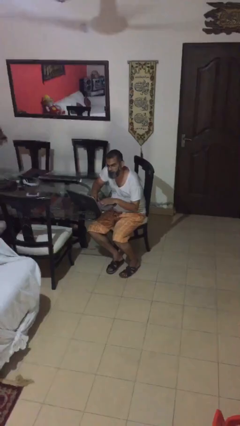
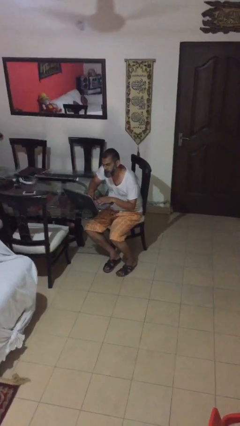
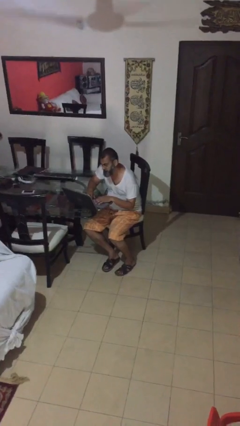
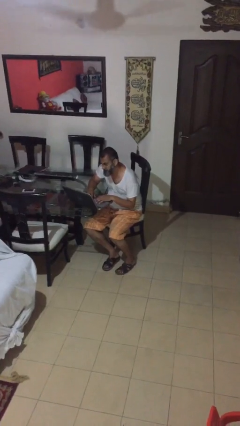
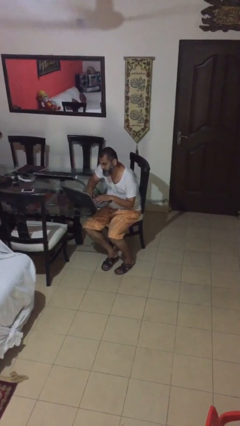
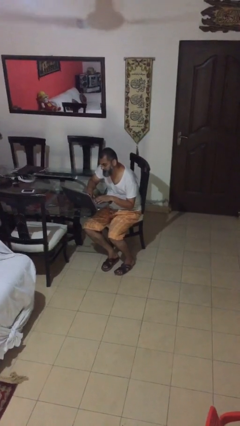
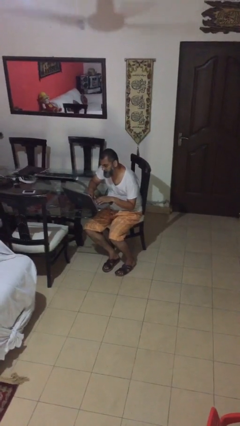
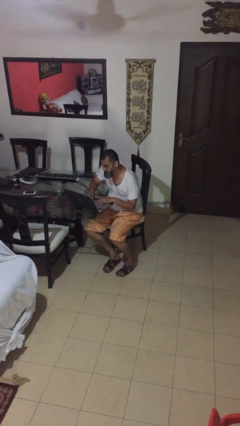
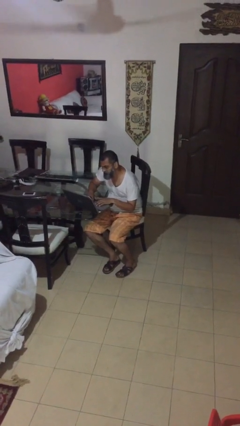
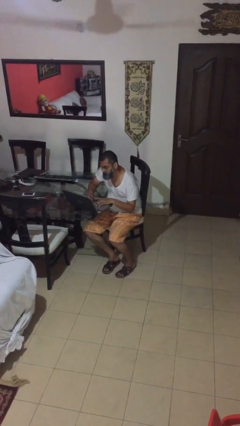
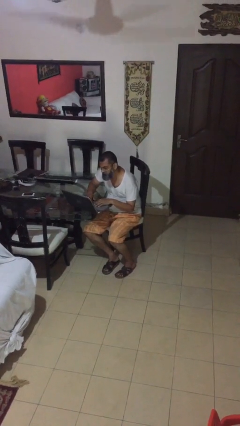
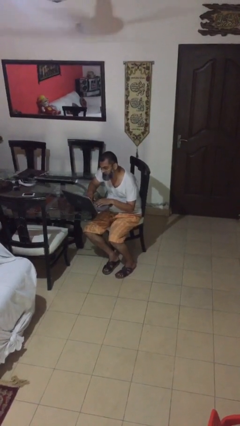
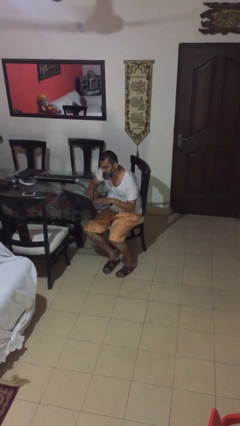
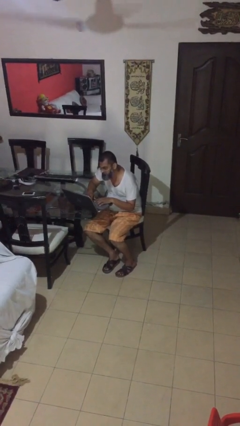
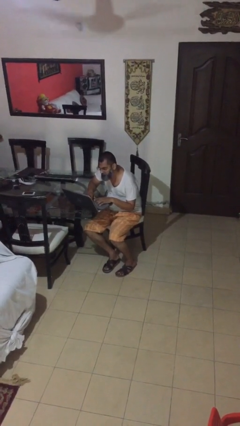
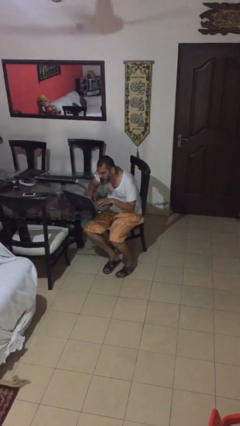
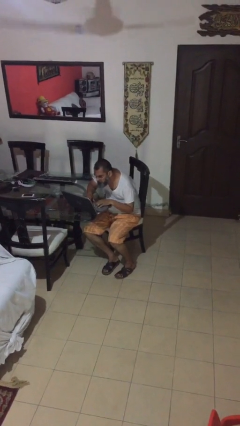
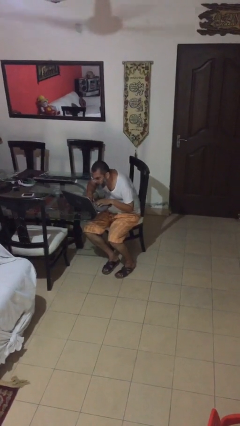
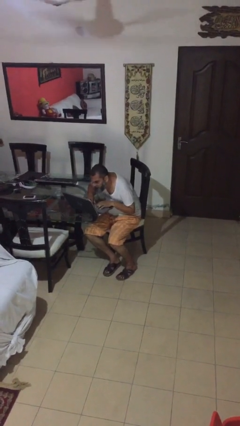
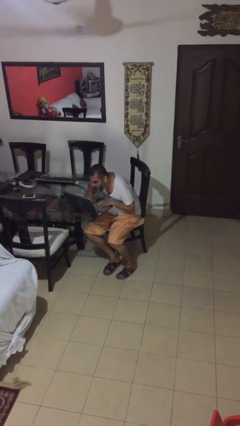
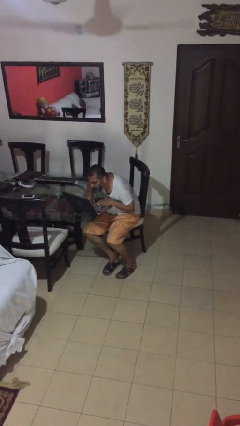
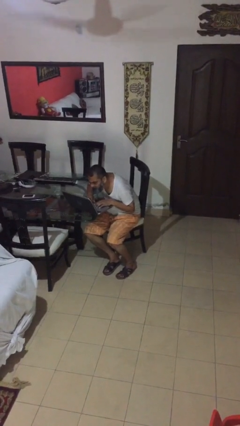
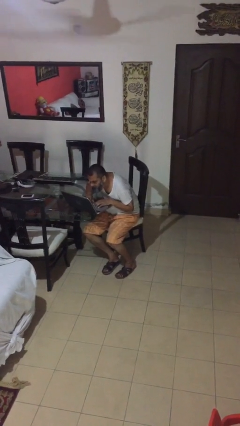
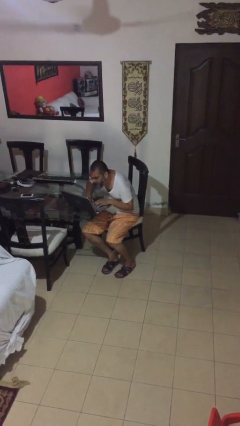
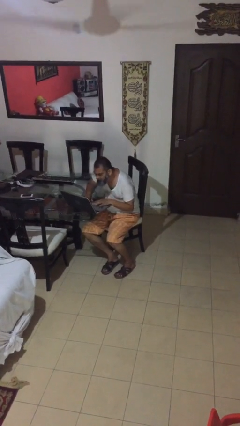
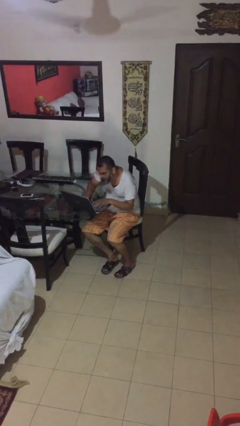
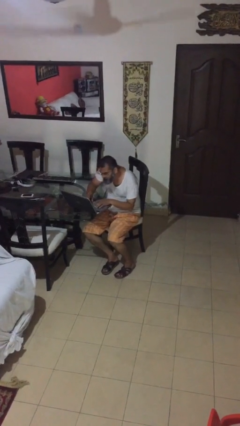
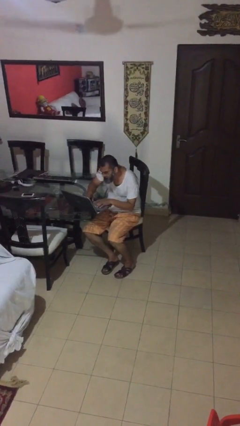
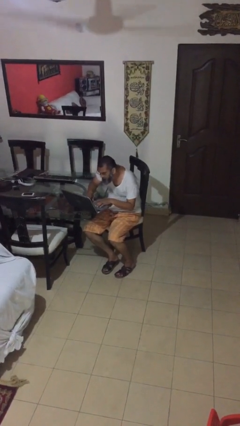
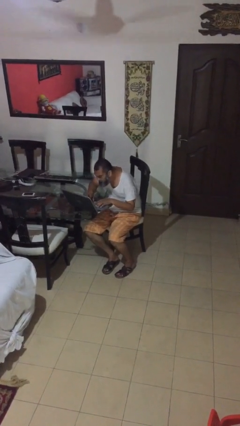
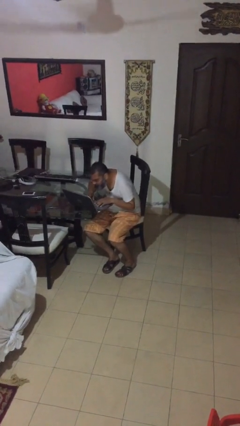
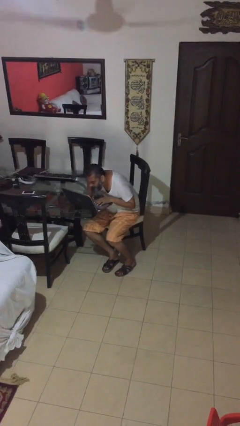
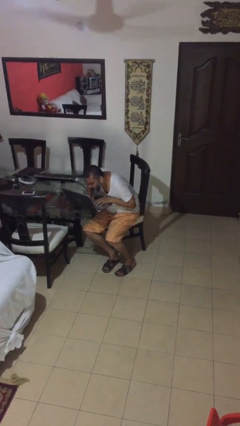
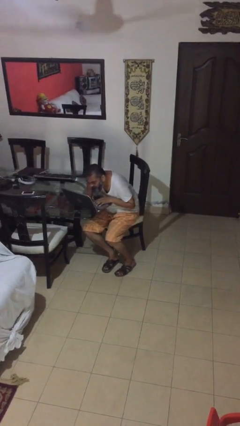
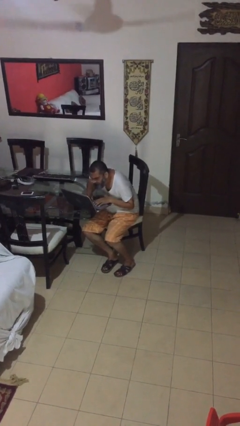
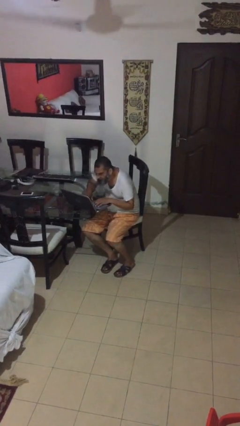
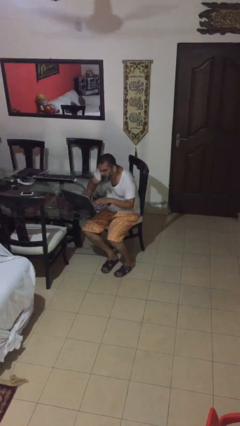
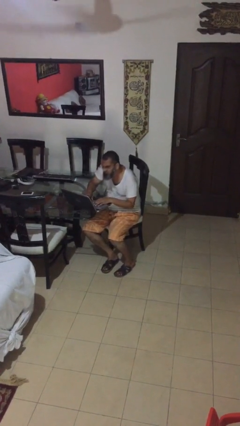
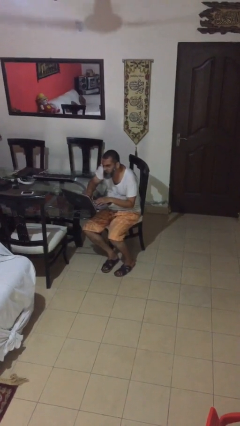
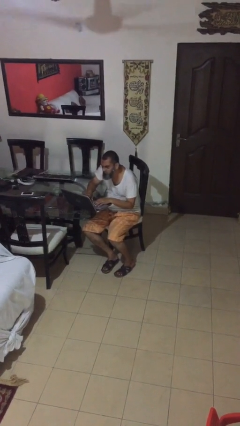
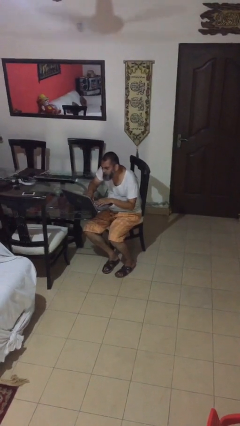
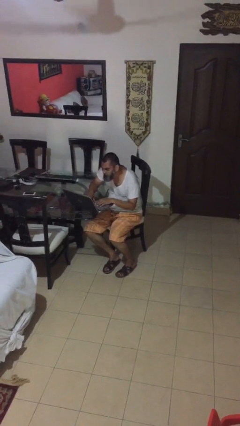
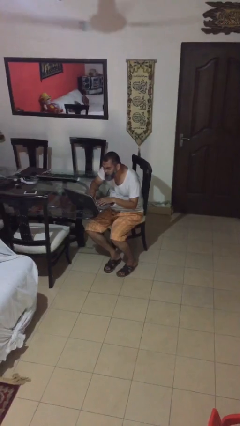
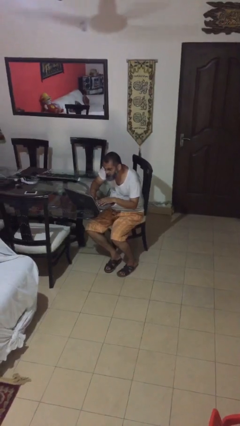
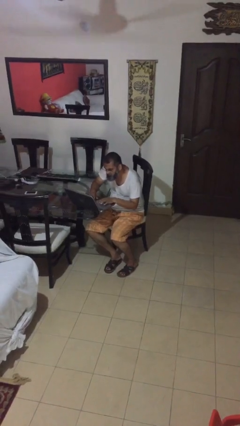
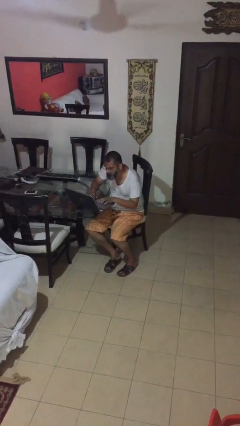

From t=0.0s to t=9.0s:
person interacts with laptop

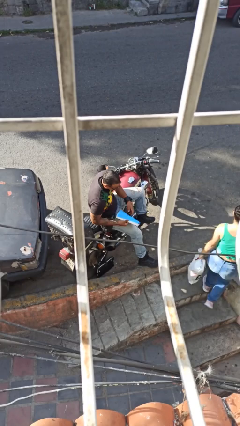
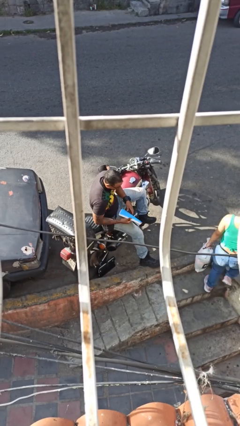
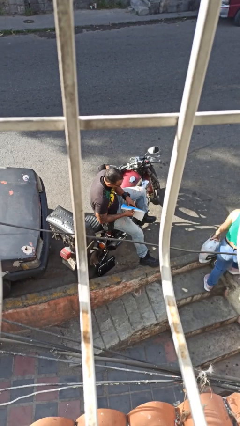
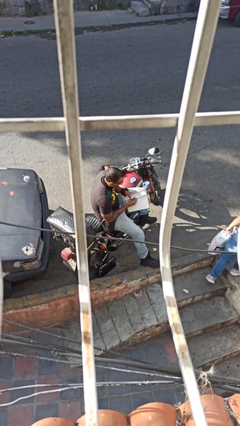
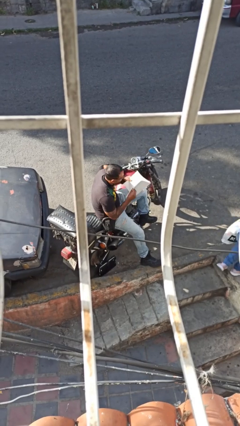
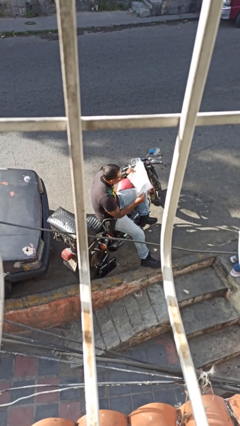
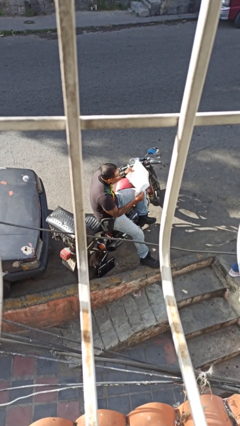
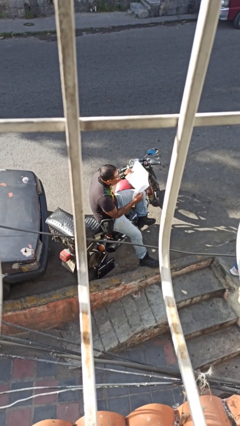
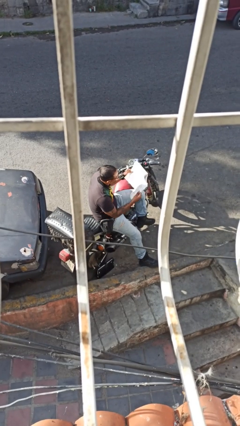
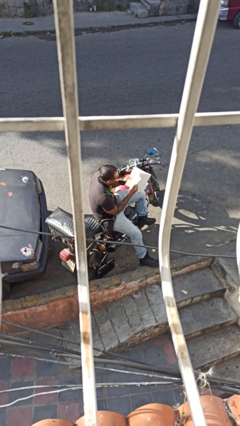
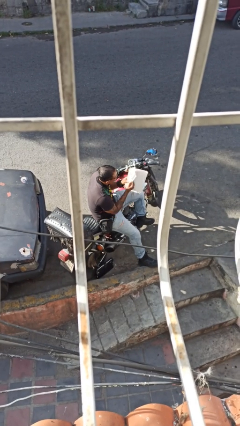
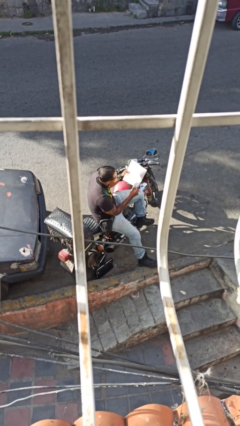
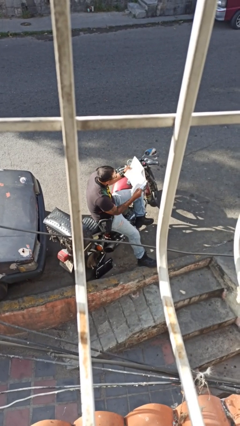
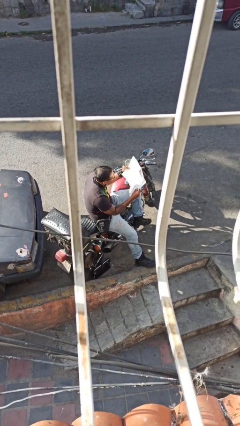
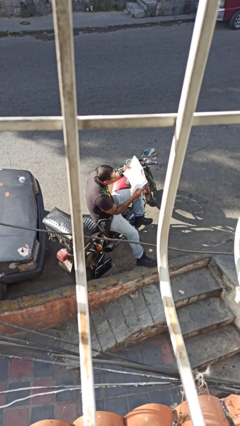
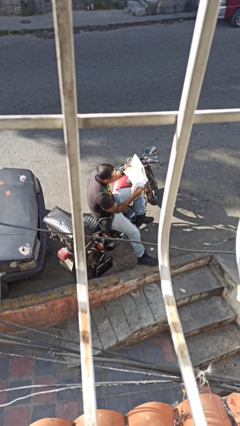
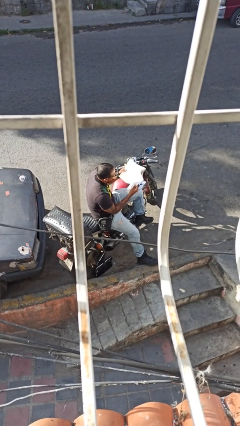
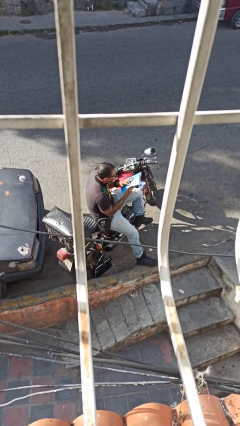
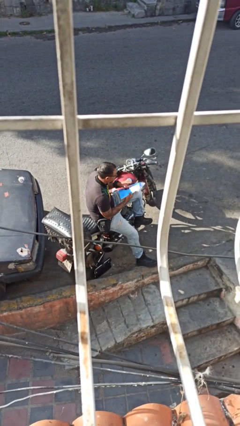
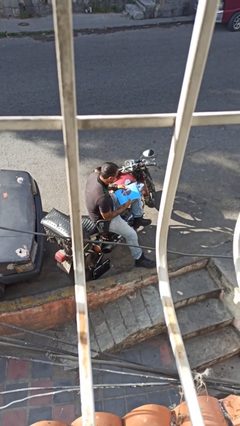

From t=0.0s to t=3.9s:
person reads document

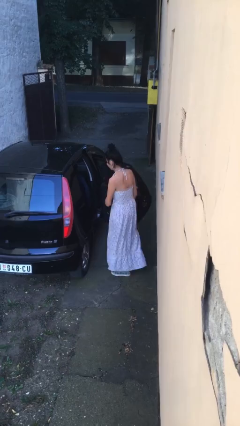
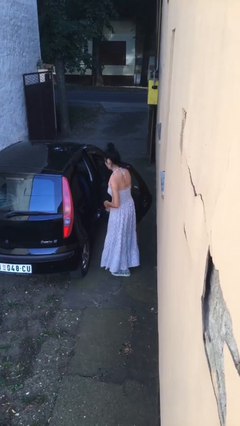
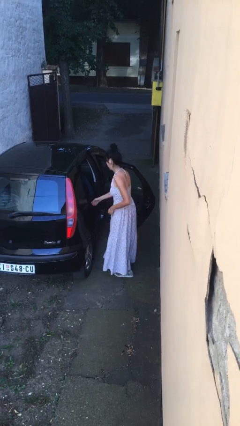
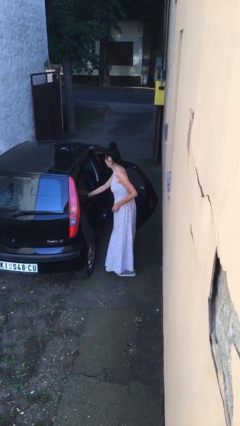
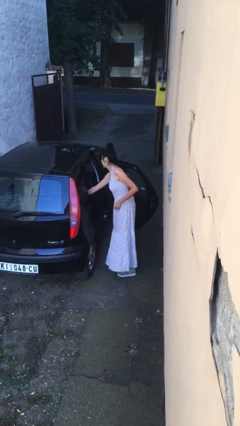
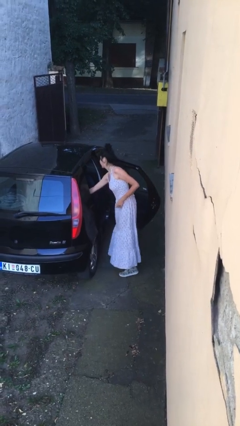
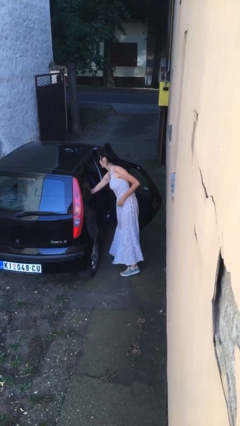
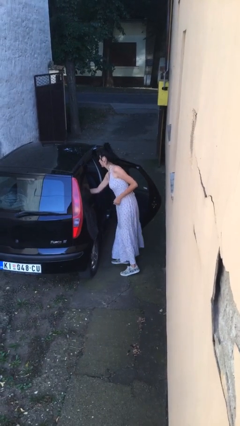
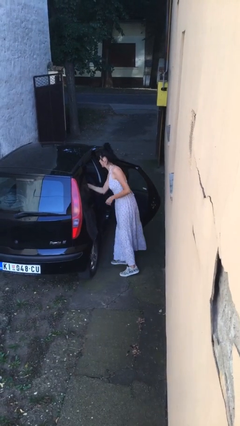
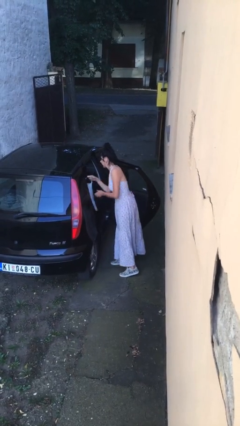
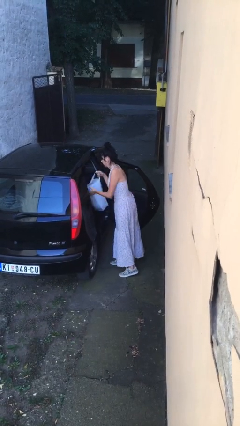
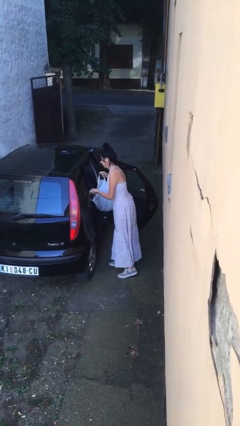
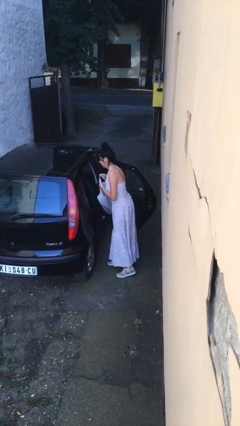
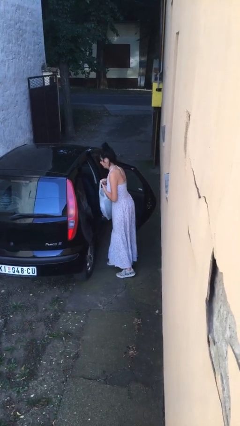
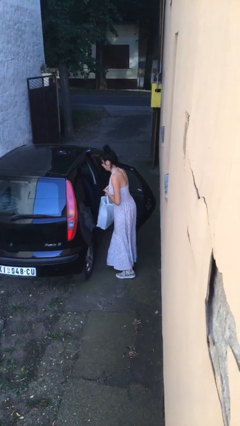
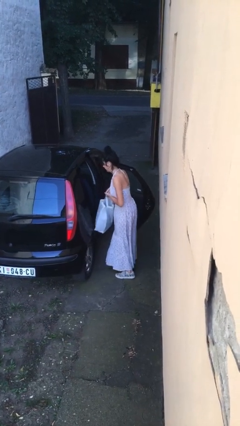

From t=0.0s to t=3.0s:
person unloads car

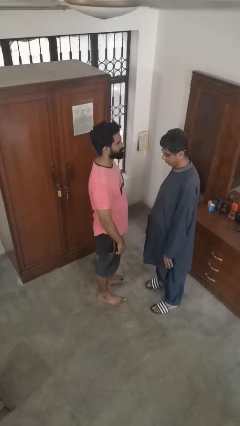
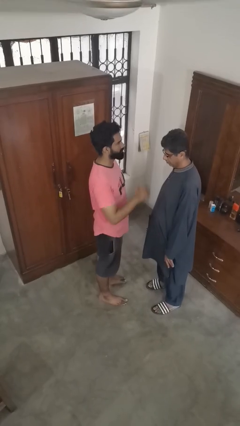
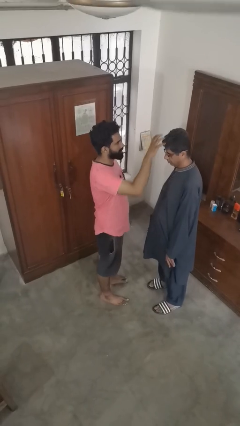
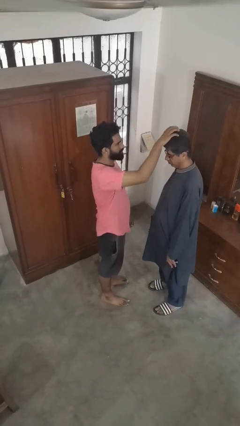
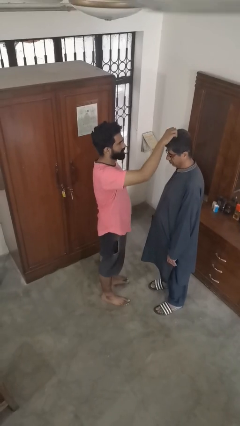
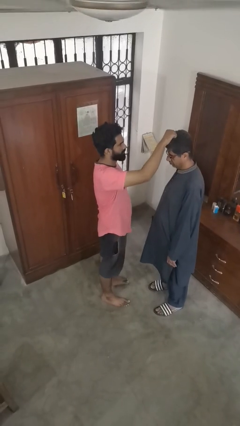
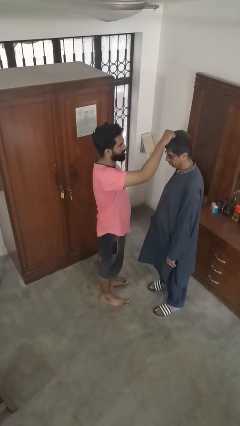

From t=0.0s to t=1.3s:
person grabs person by hair

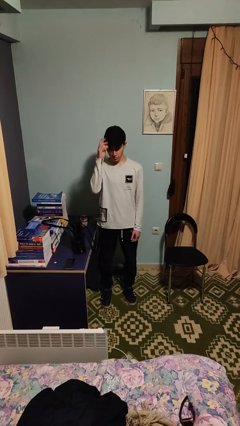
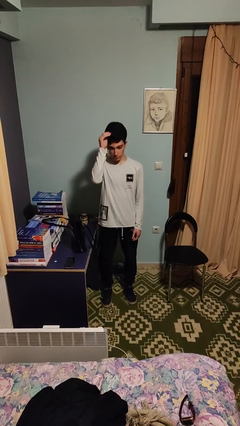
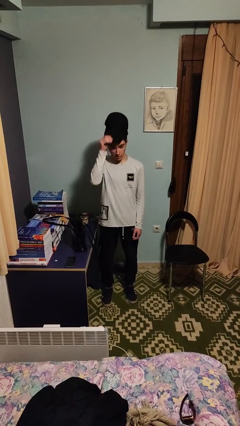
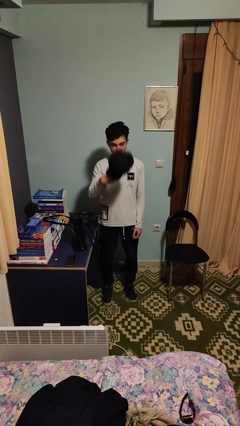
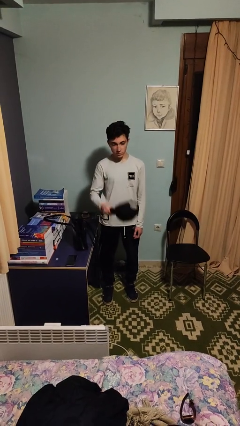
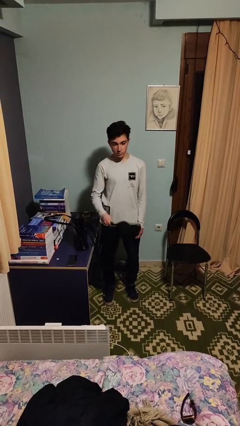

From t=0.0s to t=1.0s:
person takes off hat
